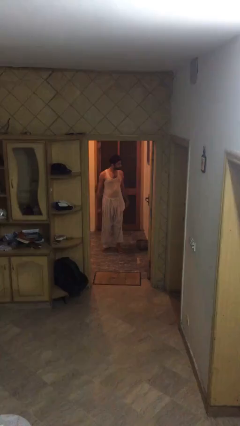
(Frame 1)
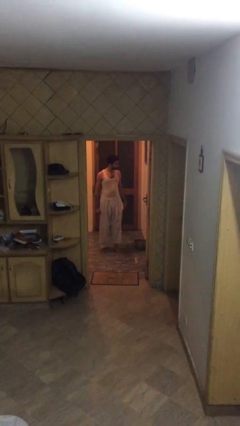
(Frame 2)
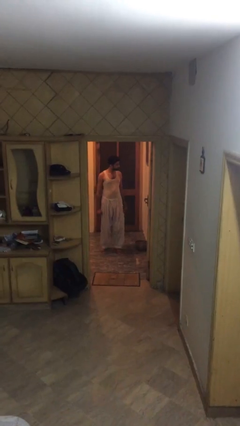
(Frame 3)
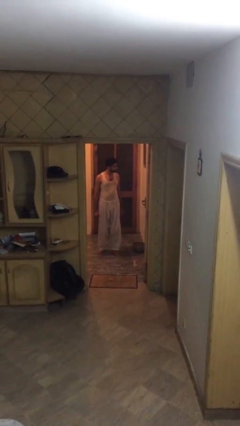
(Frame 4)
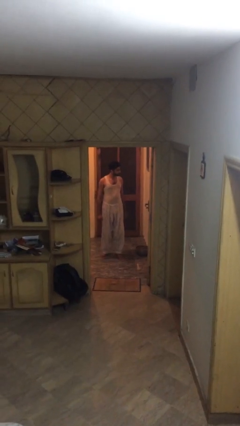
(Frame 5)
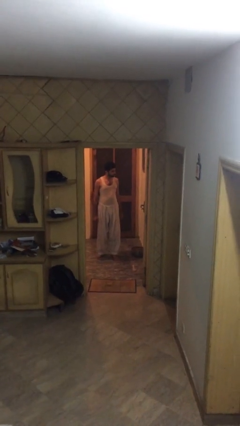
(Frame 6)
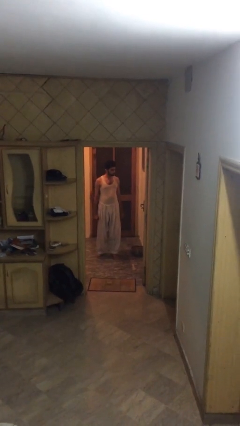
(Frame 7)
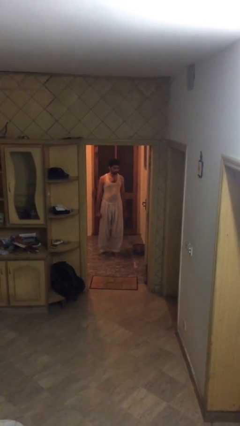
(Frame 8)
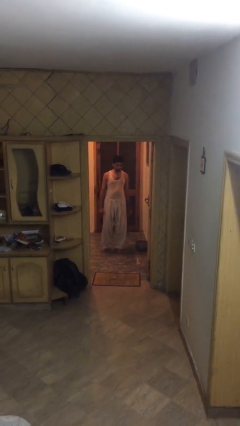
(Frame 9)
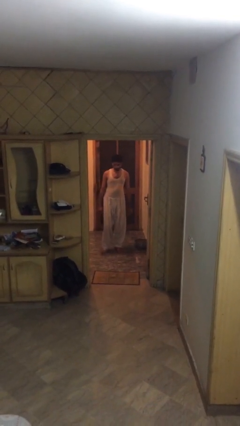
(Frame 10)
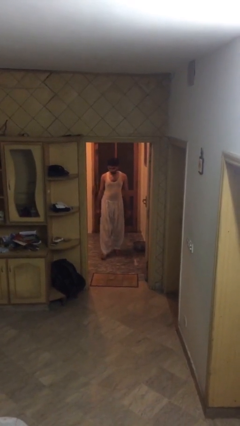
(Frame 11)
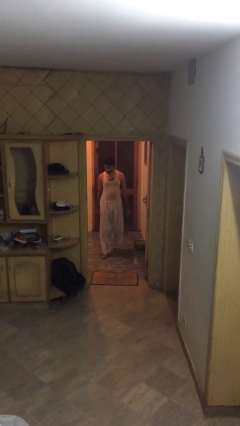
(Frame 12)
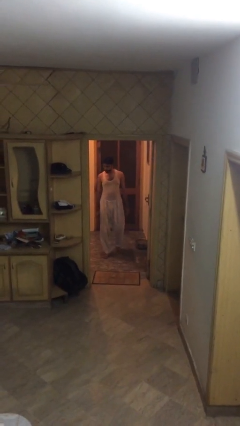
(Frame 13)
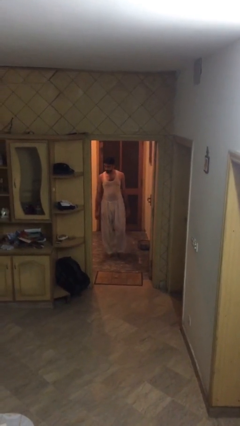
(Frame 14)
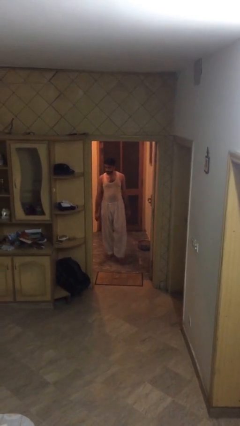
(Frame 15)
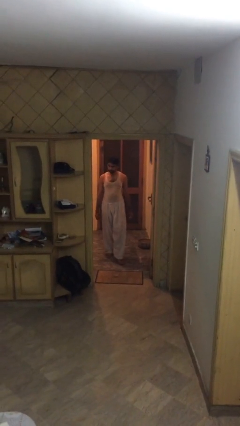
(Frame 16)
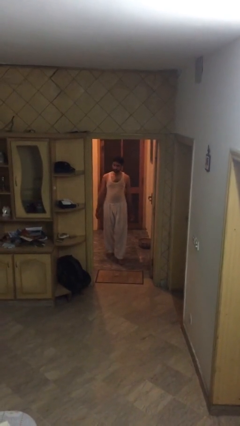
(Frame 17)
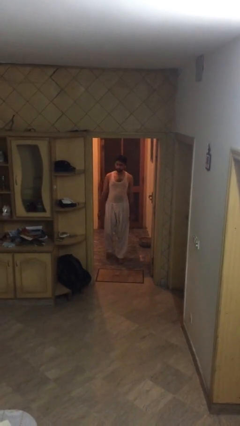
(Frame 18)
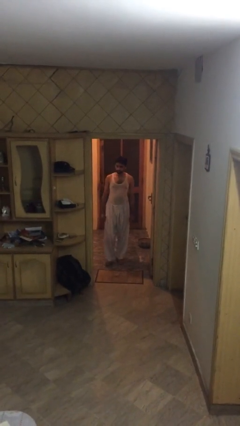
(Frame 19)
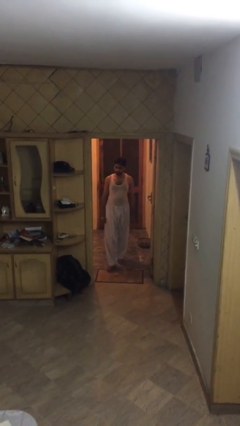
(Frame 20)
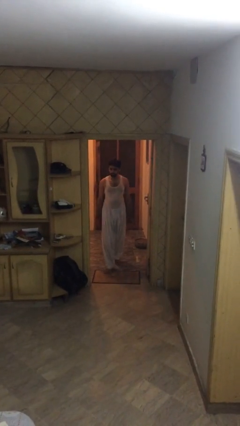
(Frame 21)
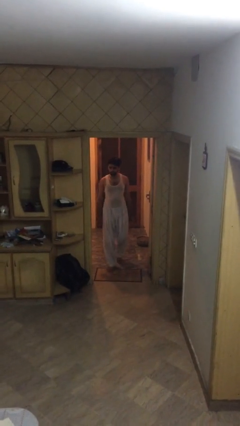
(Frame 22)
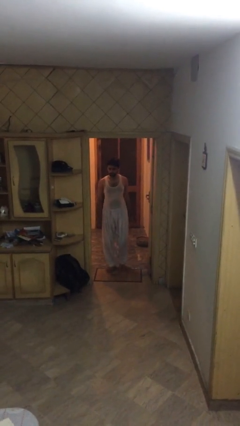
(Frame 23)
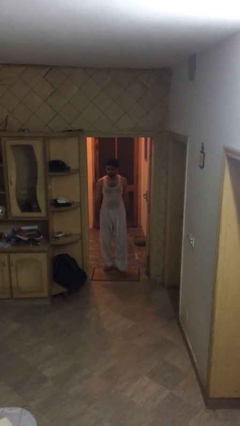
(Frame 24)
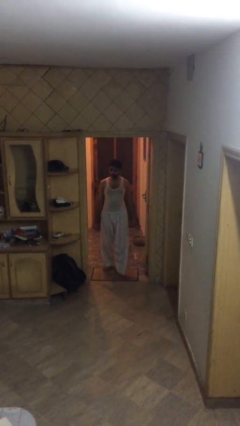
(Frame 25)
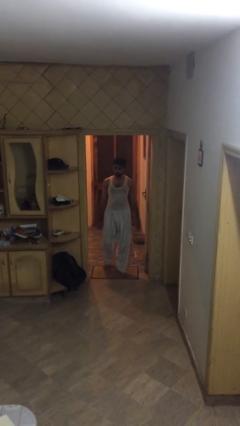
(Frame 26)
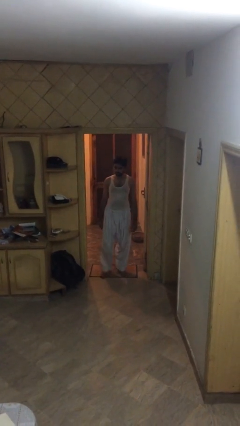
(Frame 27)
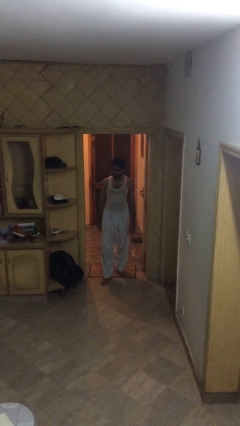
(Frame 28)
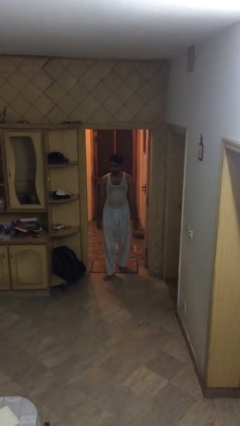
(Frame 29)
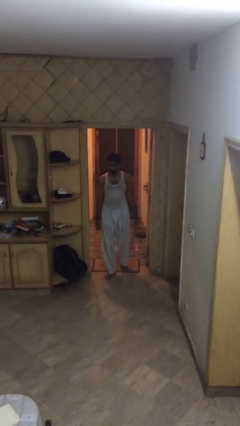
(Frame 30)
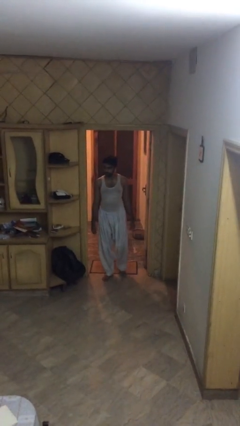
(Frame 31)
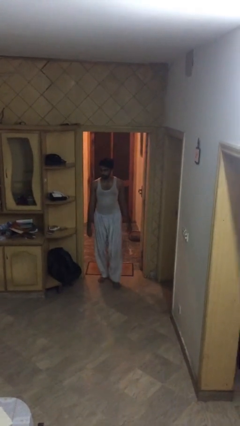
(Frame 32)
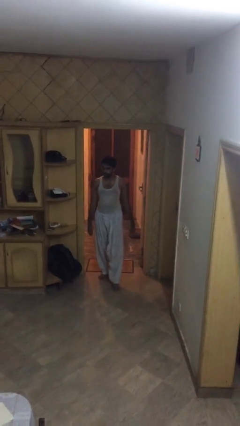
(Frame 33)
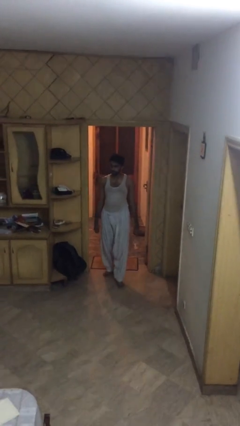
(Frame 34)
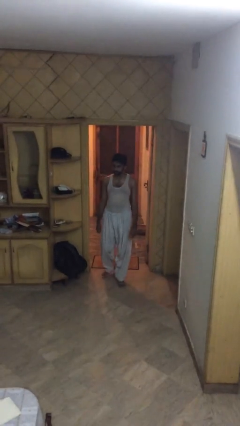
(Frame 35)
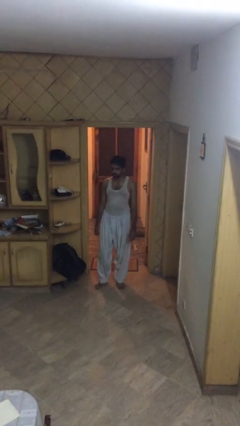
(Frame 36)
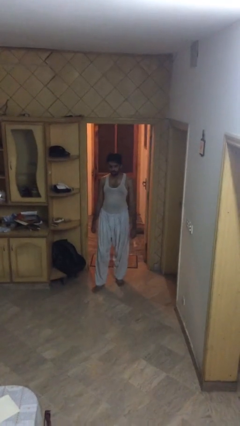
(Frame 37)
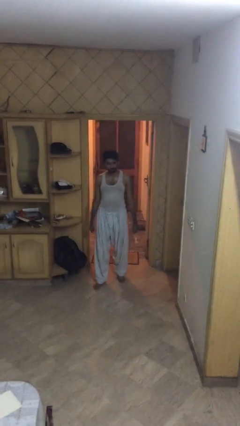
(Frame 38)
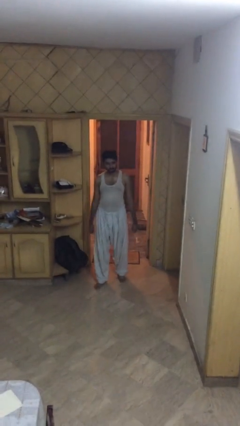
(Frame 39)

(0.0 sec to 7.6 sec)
person enters scene through structure

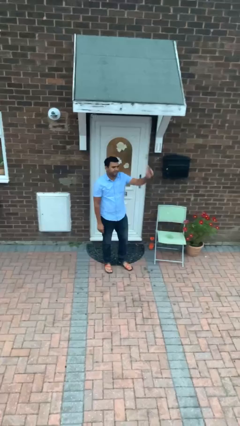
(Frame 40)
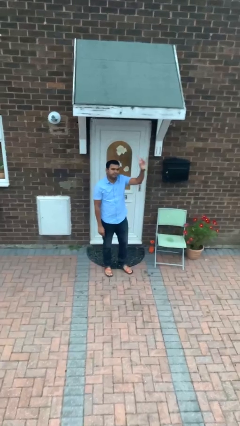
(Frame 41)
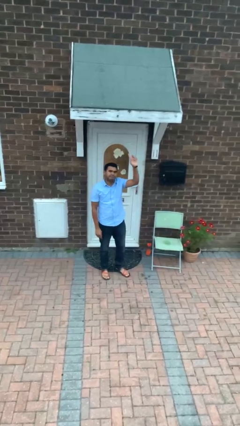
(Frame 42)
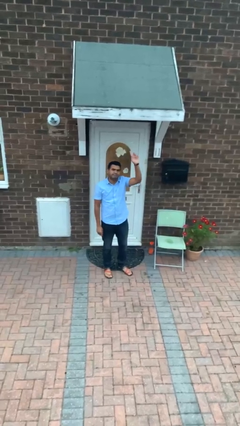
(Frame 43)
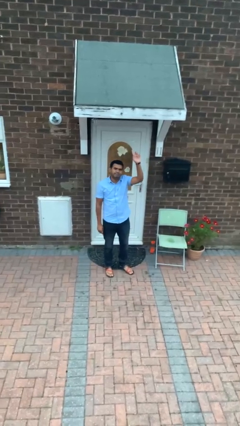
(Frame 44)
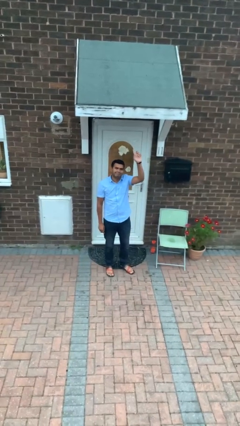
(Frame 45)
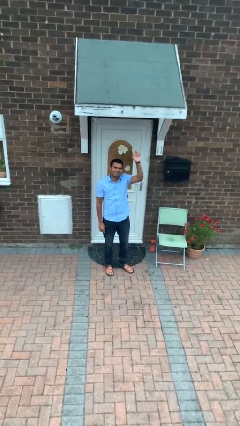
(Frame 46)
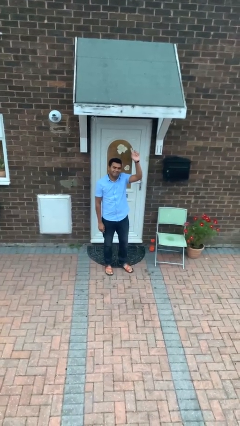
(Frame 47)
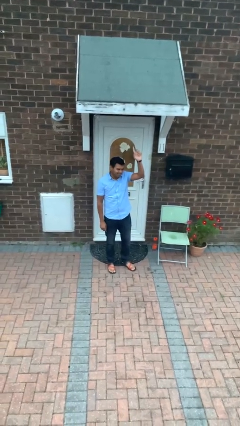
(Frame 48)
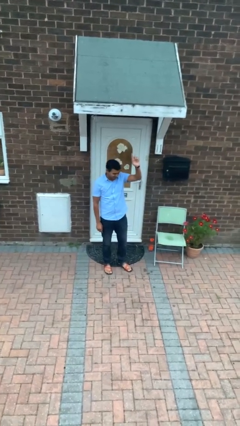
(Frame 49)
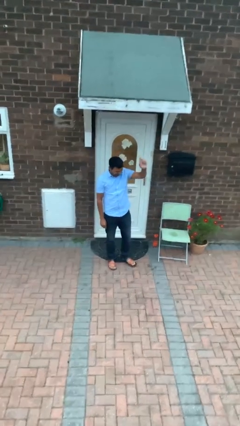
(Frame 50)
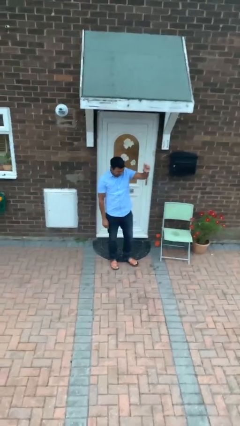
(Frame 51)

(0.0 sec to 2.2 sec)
person gestures raise hand

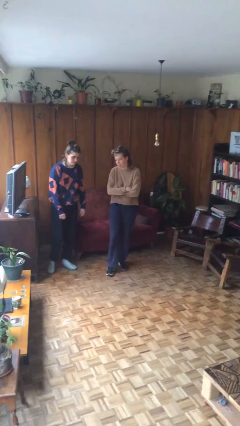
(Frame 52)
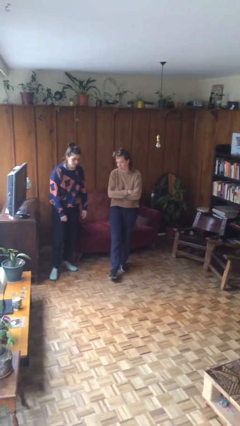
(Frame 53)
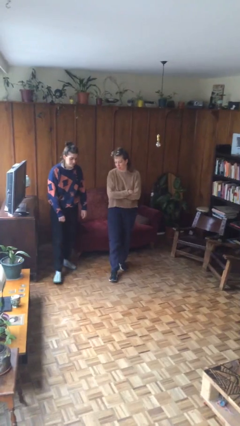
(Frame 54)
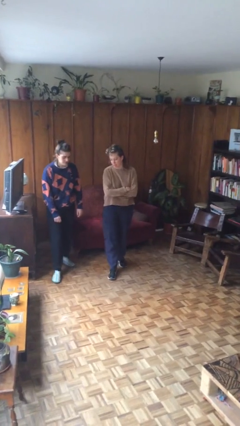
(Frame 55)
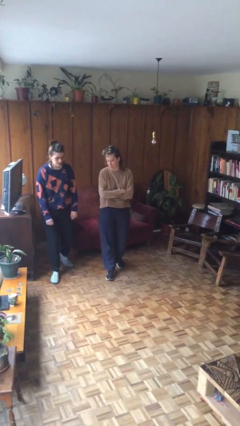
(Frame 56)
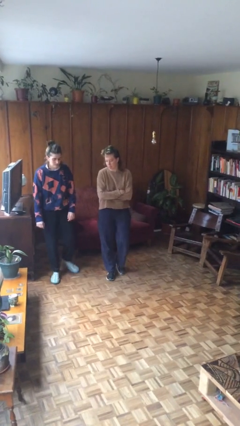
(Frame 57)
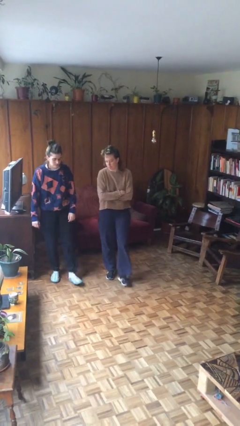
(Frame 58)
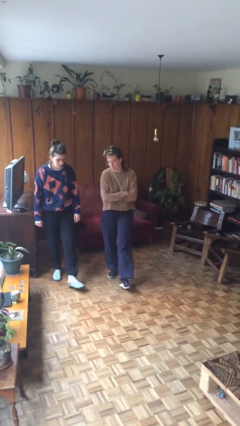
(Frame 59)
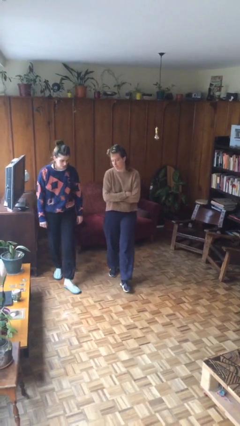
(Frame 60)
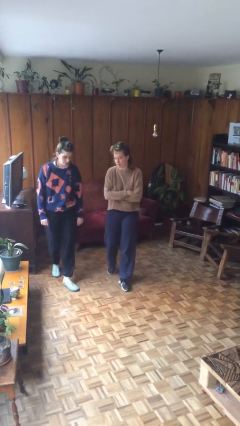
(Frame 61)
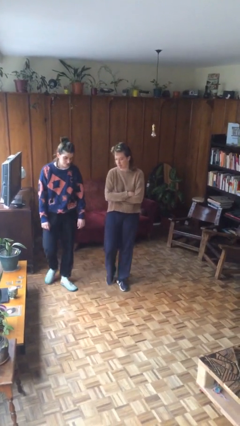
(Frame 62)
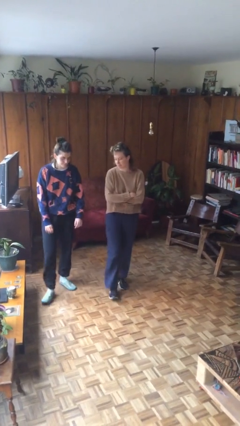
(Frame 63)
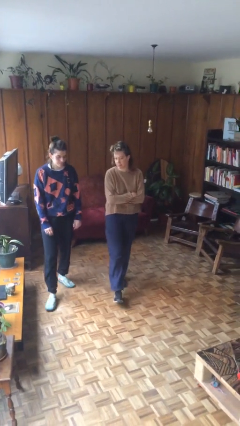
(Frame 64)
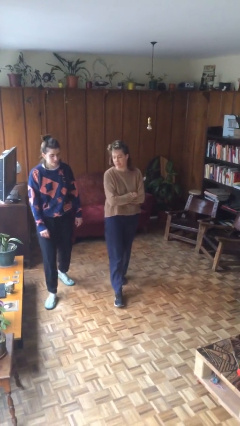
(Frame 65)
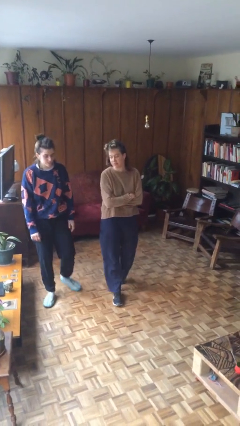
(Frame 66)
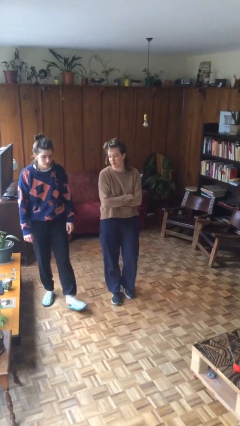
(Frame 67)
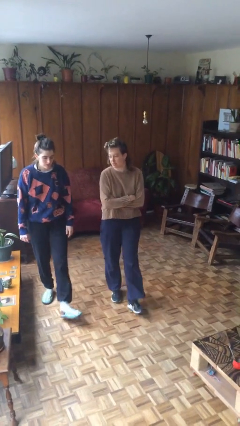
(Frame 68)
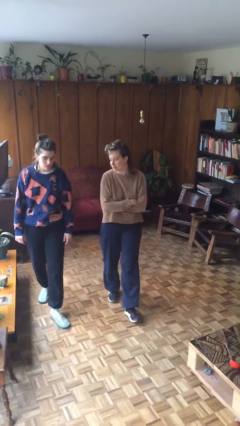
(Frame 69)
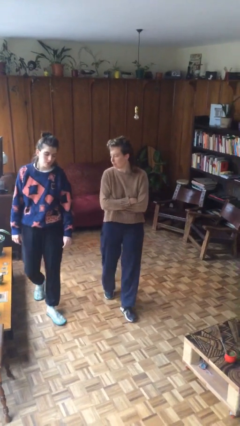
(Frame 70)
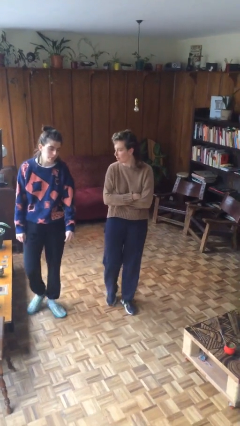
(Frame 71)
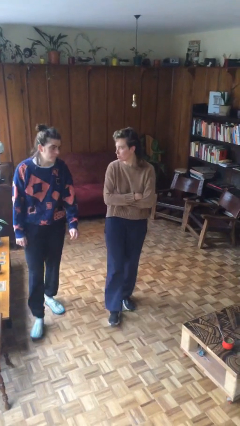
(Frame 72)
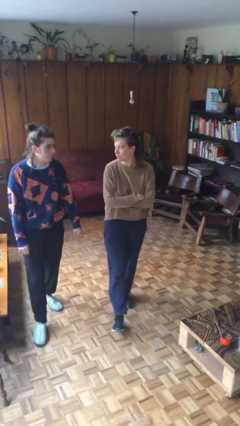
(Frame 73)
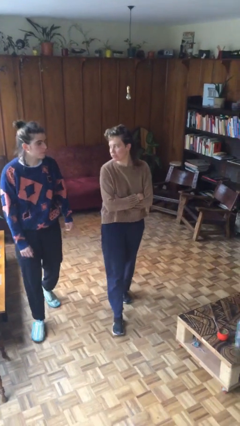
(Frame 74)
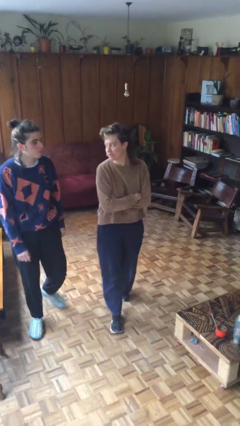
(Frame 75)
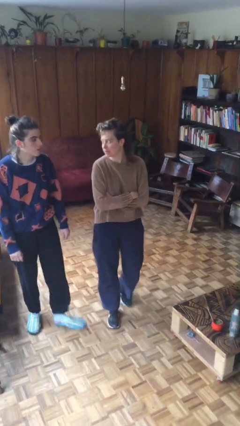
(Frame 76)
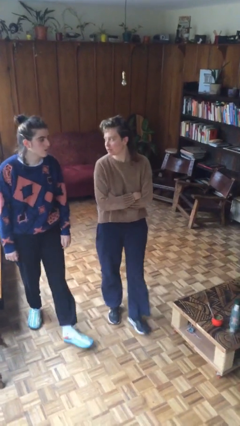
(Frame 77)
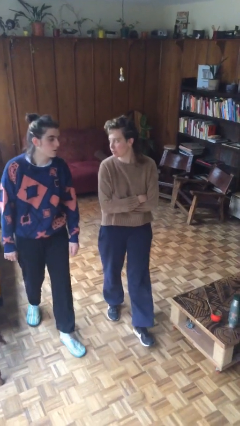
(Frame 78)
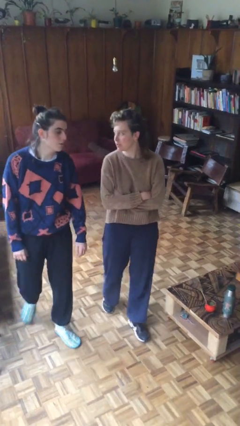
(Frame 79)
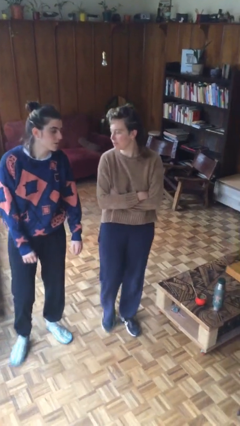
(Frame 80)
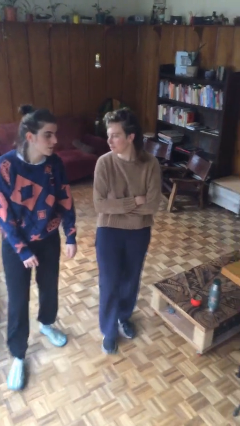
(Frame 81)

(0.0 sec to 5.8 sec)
person talks to person

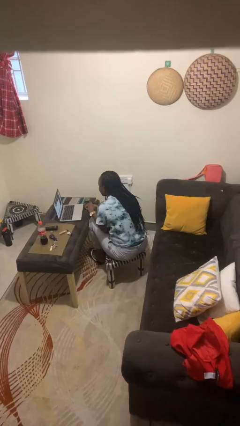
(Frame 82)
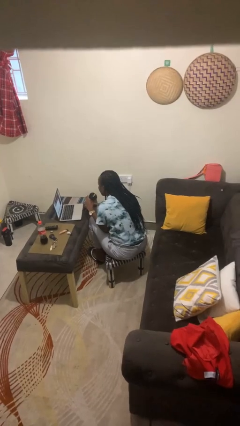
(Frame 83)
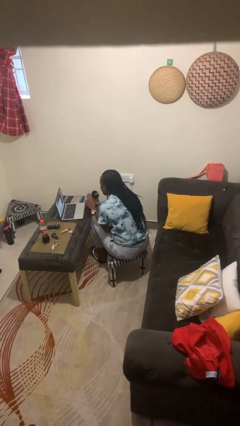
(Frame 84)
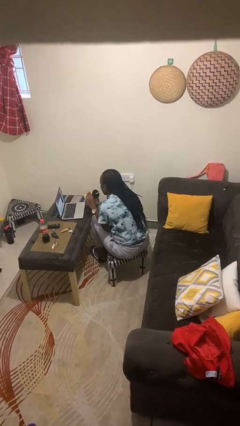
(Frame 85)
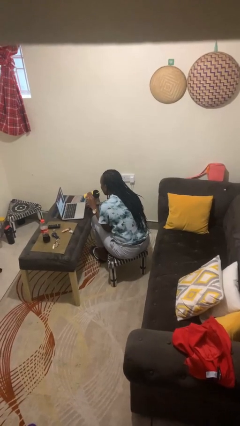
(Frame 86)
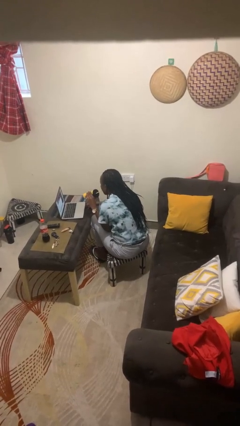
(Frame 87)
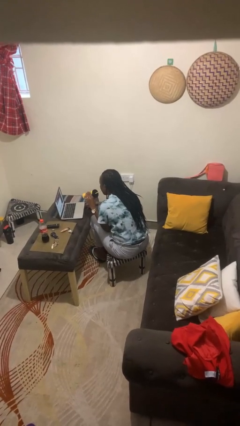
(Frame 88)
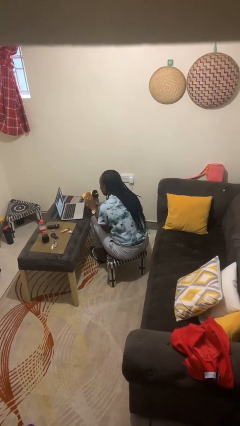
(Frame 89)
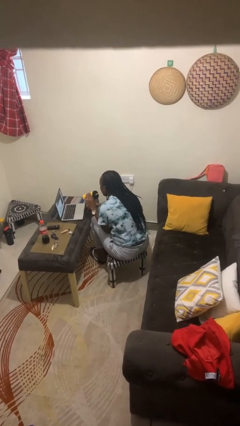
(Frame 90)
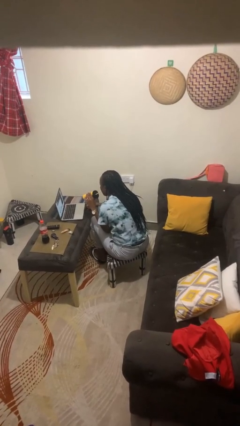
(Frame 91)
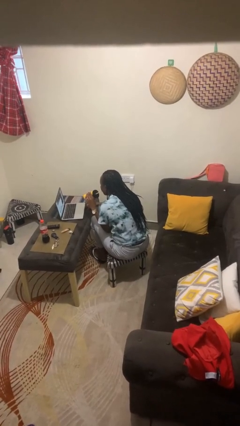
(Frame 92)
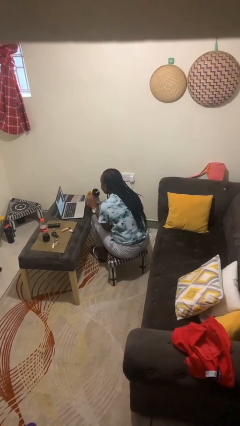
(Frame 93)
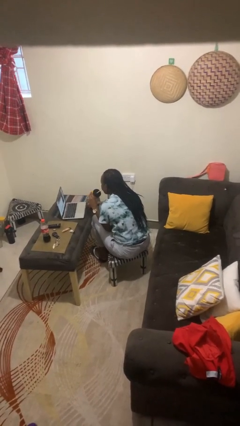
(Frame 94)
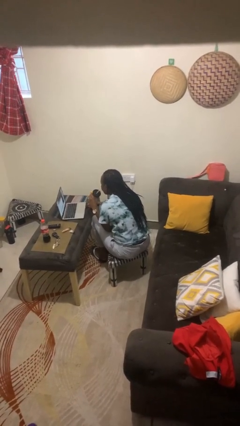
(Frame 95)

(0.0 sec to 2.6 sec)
person drinks from straw
